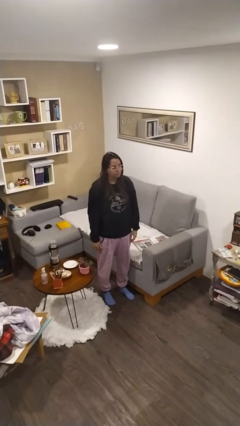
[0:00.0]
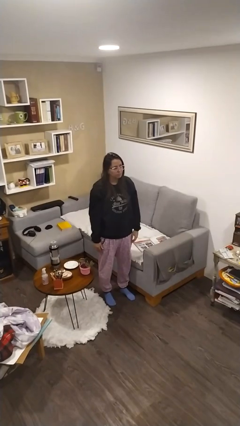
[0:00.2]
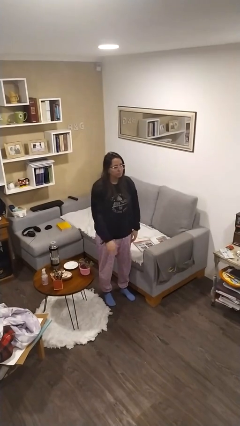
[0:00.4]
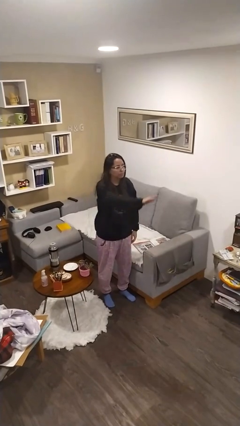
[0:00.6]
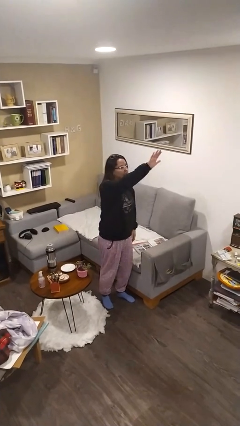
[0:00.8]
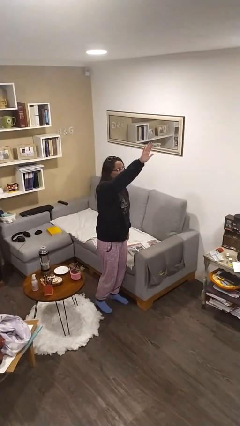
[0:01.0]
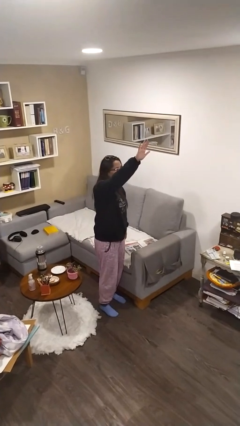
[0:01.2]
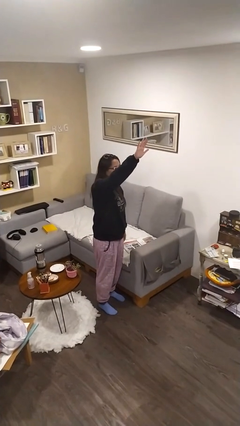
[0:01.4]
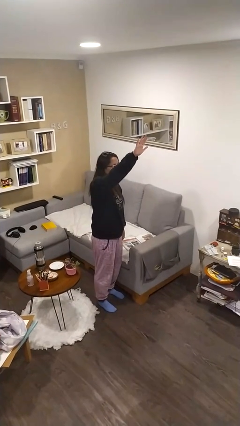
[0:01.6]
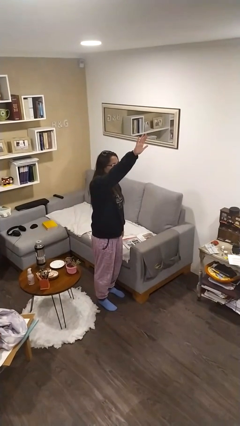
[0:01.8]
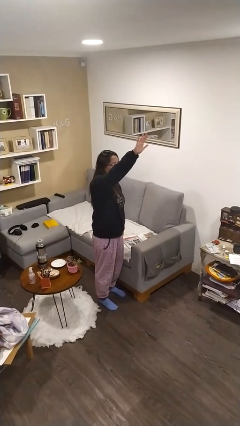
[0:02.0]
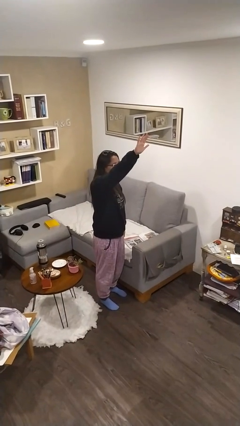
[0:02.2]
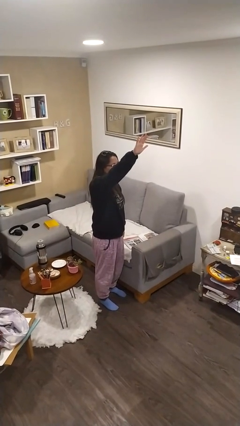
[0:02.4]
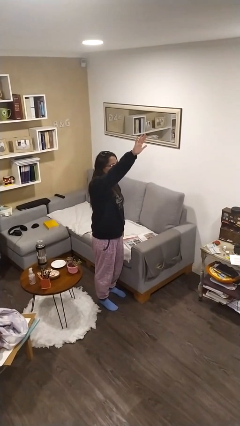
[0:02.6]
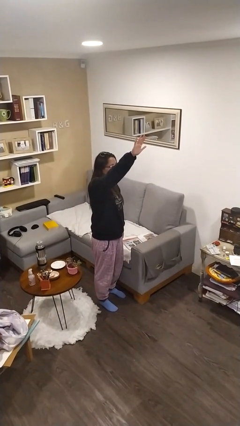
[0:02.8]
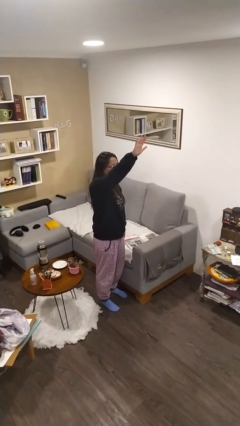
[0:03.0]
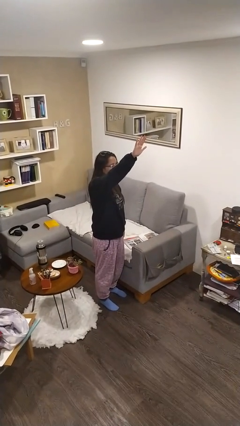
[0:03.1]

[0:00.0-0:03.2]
person gestures raise hand

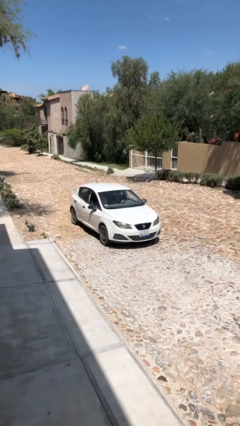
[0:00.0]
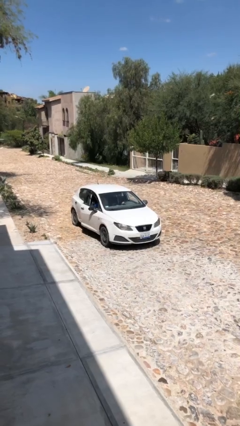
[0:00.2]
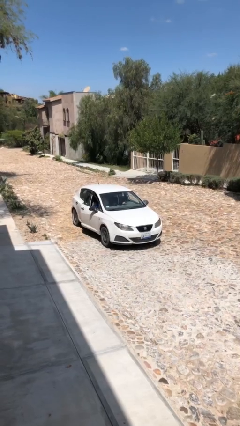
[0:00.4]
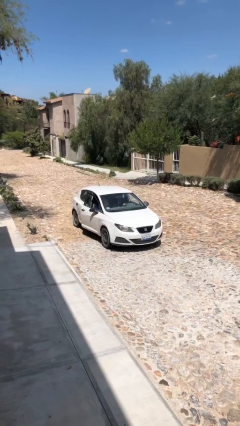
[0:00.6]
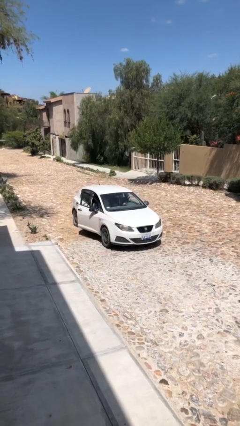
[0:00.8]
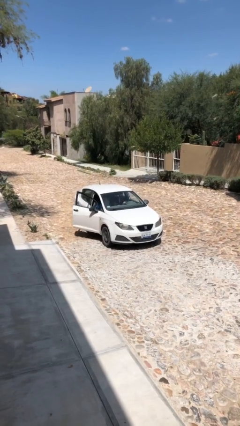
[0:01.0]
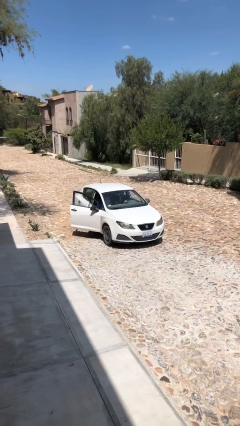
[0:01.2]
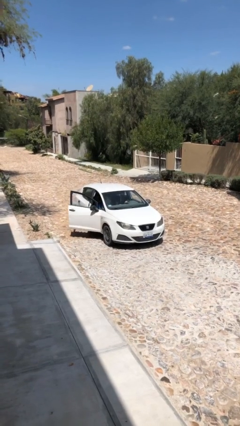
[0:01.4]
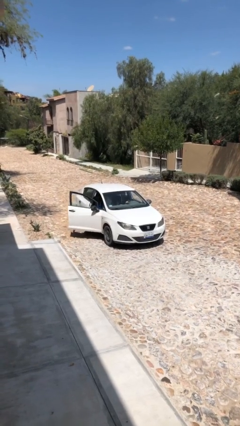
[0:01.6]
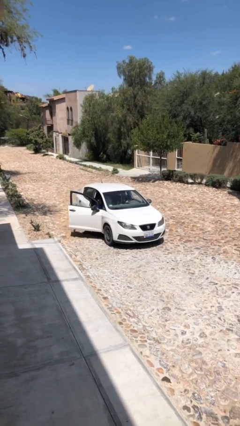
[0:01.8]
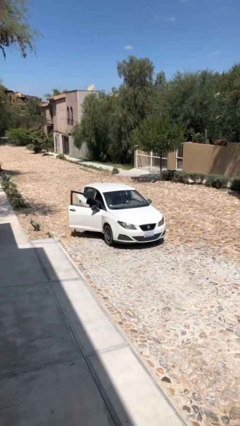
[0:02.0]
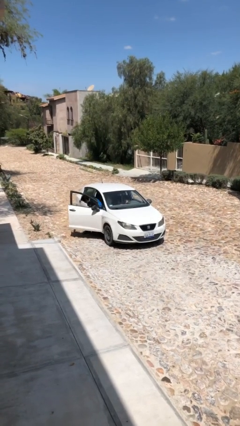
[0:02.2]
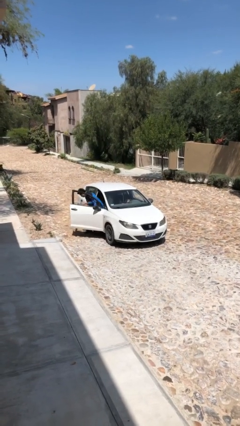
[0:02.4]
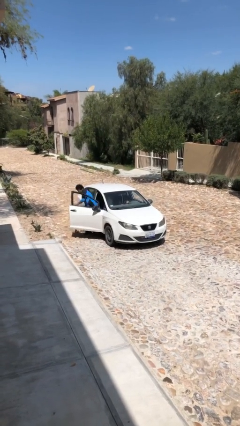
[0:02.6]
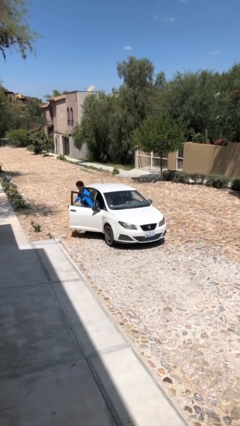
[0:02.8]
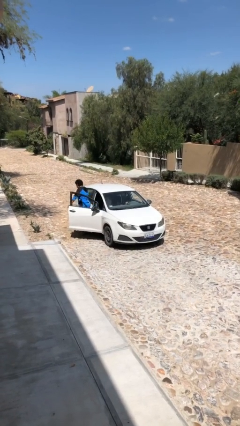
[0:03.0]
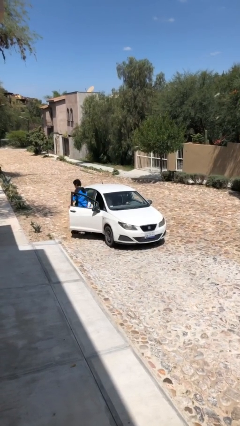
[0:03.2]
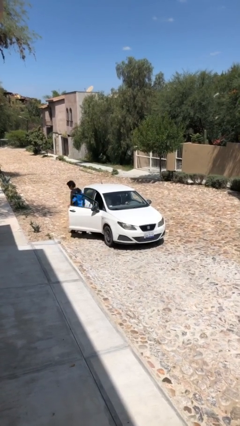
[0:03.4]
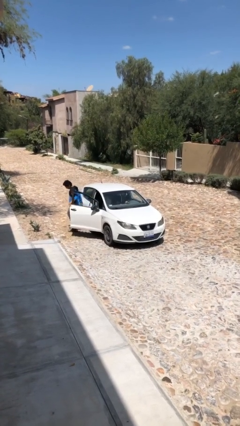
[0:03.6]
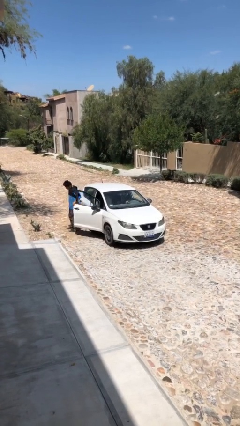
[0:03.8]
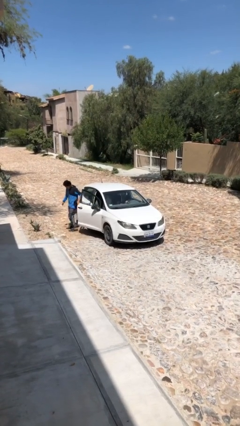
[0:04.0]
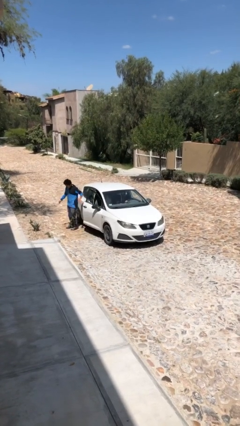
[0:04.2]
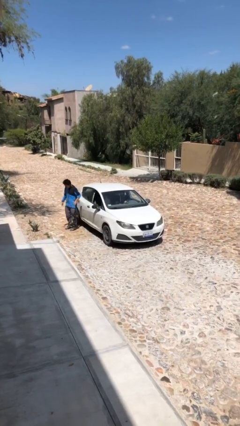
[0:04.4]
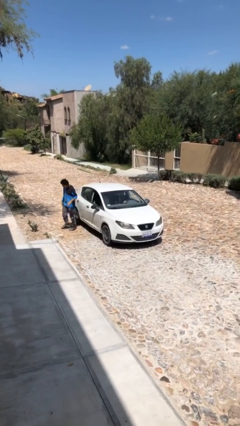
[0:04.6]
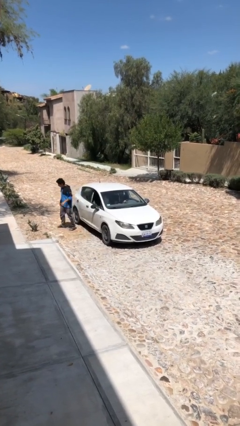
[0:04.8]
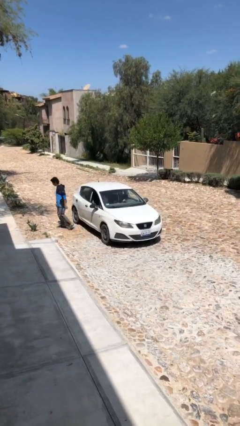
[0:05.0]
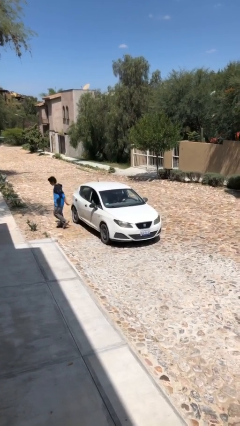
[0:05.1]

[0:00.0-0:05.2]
car drops off person

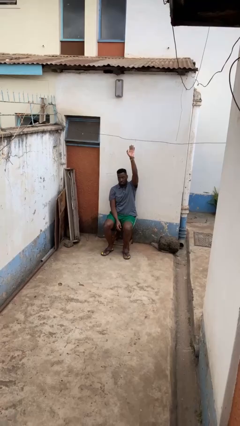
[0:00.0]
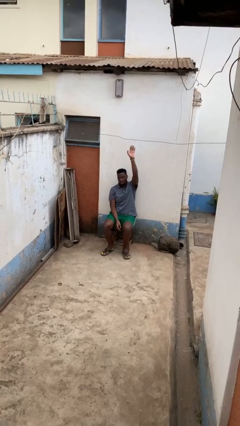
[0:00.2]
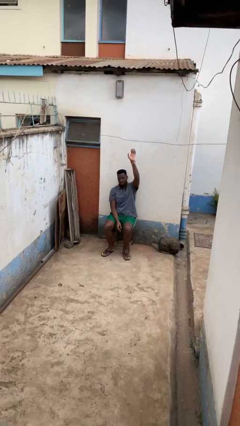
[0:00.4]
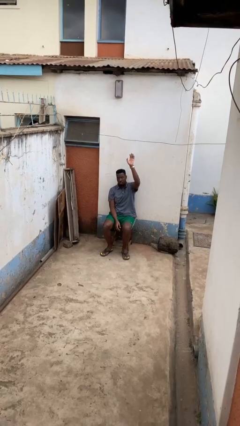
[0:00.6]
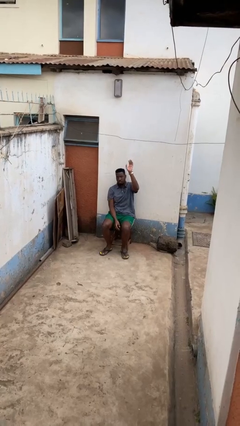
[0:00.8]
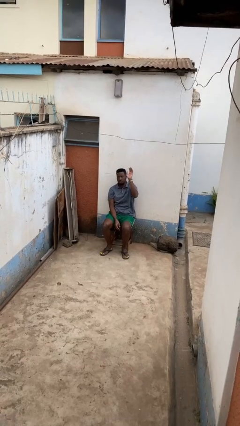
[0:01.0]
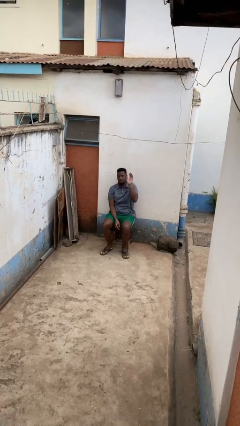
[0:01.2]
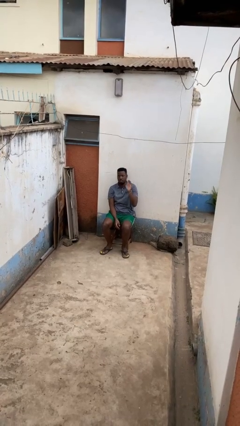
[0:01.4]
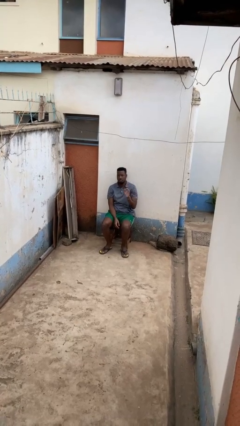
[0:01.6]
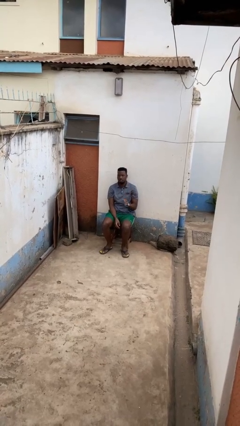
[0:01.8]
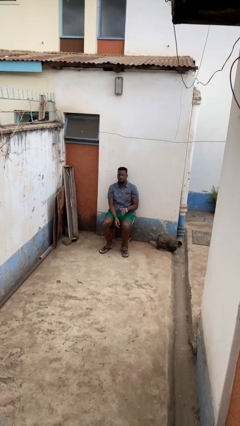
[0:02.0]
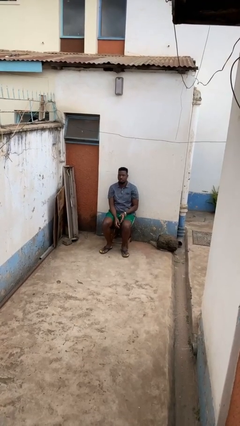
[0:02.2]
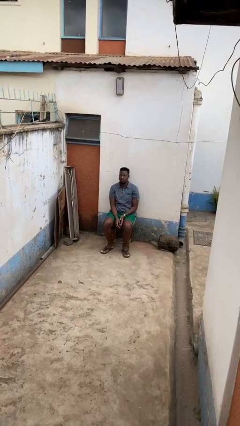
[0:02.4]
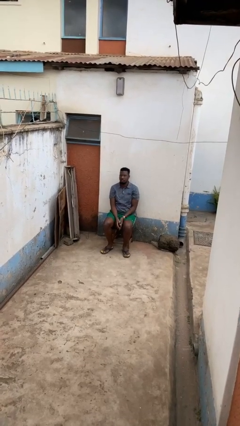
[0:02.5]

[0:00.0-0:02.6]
person gestures lower hand

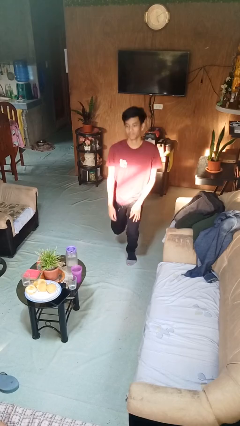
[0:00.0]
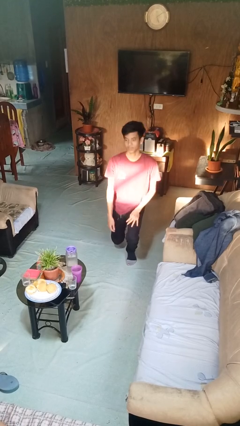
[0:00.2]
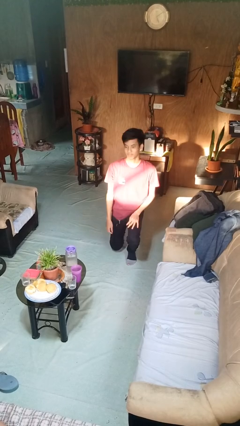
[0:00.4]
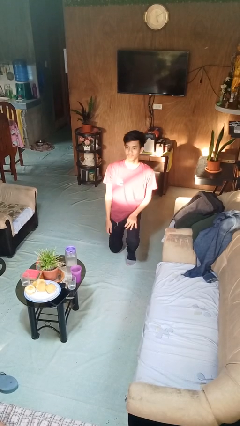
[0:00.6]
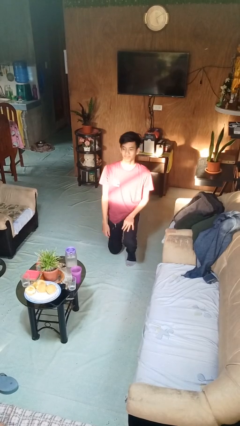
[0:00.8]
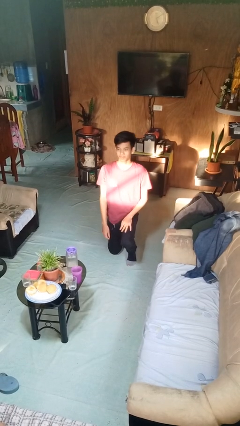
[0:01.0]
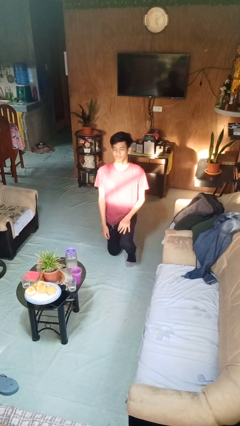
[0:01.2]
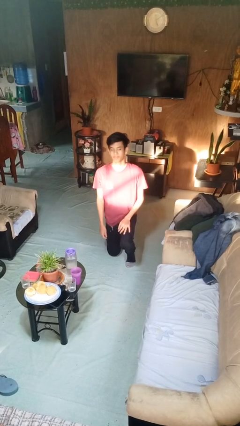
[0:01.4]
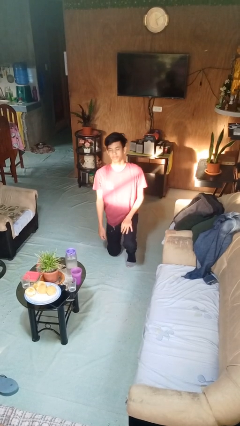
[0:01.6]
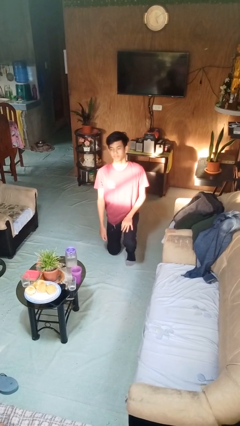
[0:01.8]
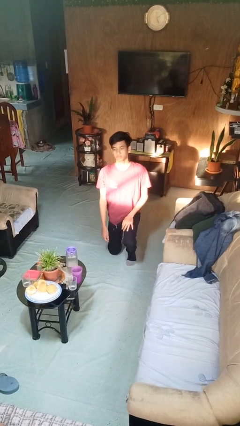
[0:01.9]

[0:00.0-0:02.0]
person kneels

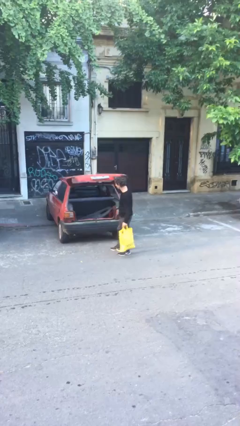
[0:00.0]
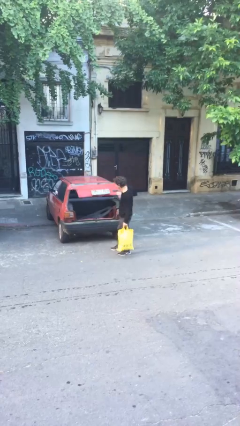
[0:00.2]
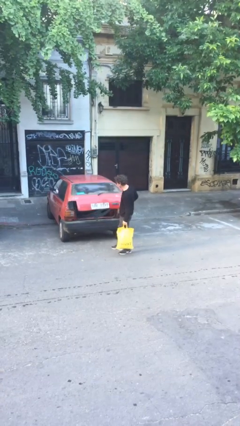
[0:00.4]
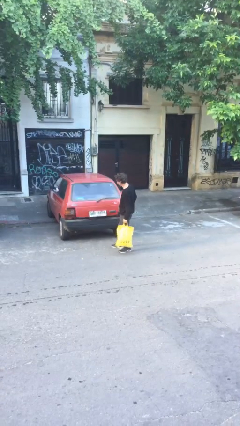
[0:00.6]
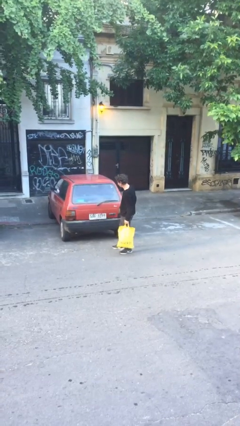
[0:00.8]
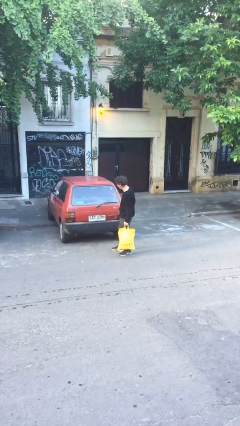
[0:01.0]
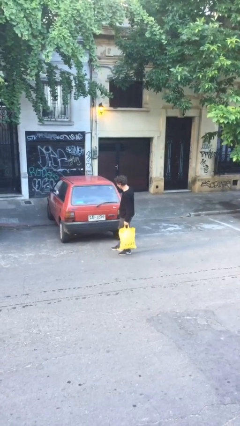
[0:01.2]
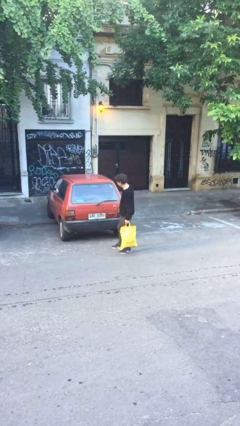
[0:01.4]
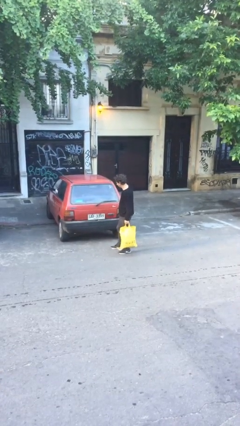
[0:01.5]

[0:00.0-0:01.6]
person closes car trunk

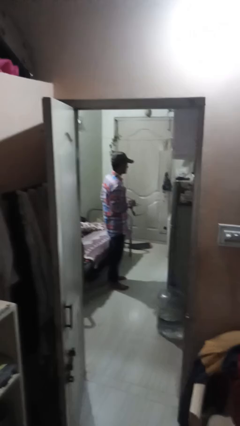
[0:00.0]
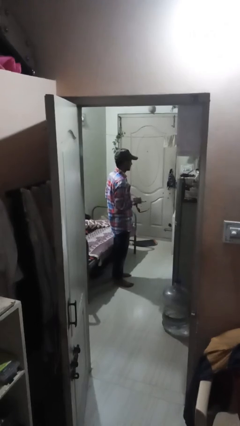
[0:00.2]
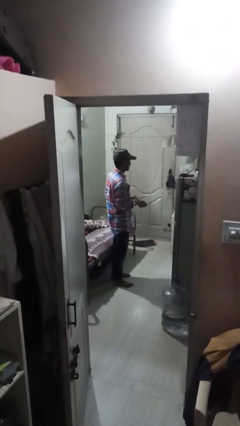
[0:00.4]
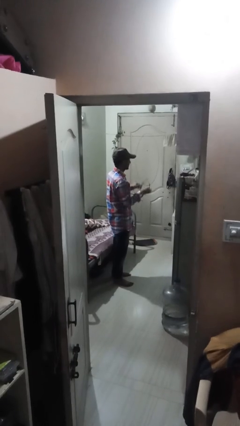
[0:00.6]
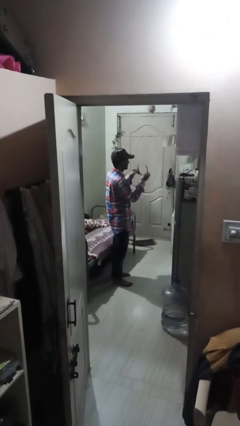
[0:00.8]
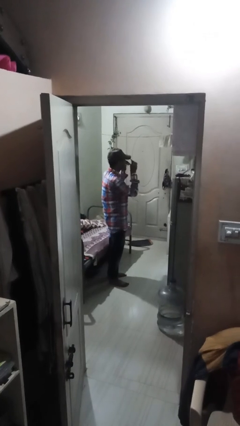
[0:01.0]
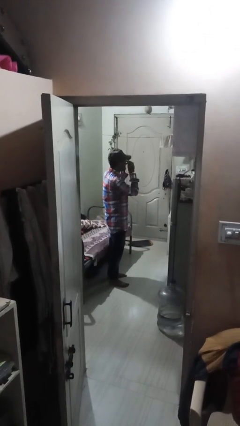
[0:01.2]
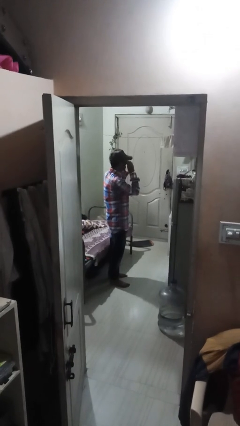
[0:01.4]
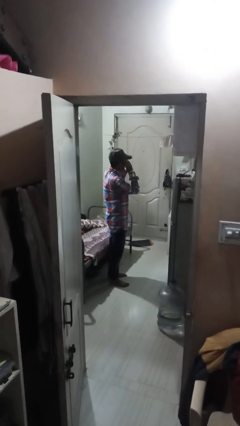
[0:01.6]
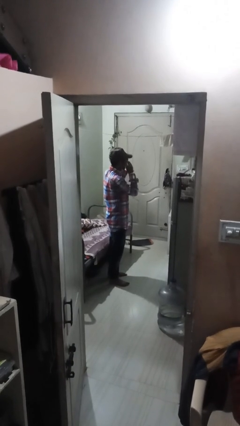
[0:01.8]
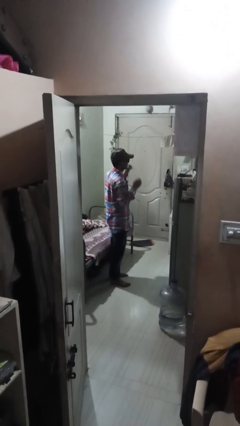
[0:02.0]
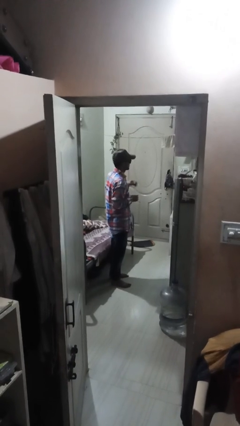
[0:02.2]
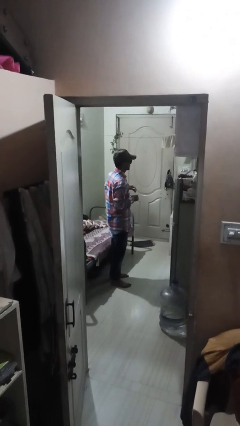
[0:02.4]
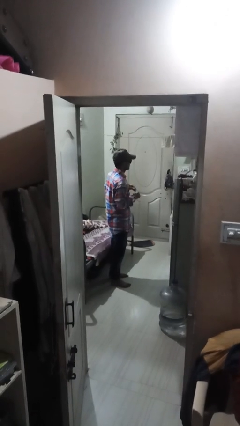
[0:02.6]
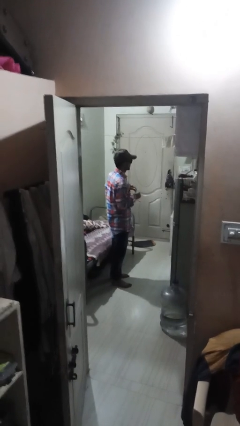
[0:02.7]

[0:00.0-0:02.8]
person puts on sunglasses

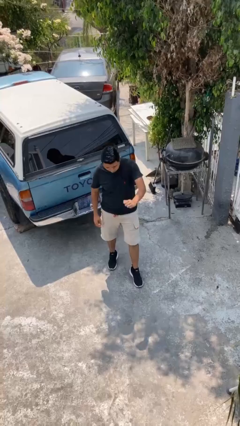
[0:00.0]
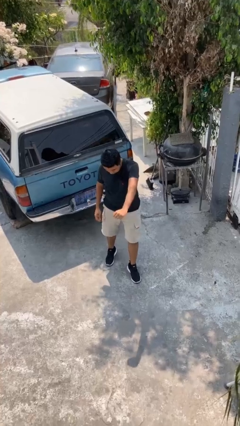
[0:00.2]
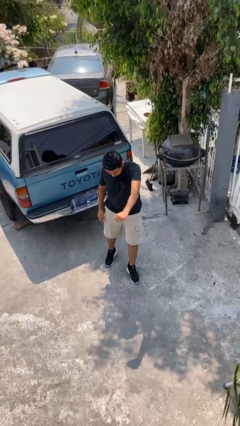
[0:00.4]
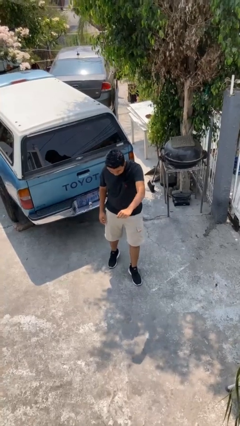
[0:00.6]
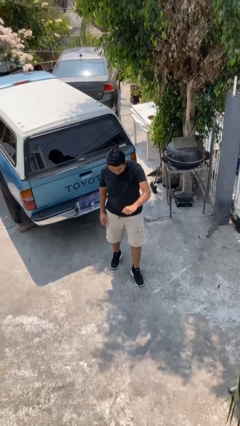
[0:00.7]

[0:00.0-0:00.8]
person karate chop
